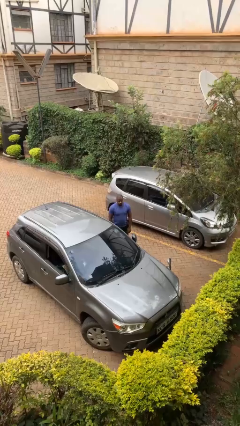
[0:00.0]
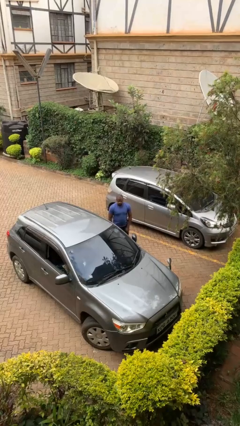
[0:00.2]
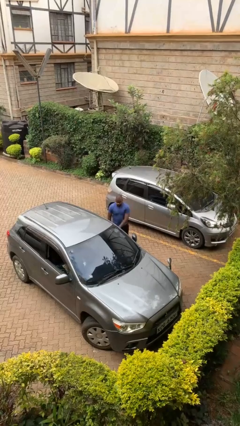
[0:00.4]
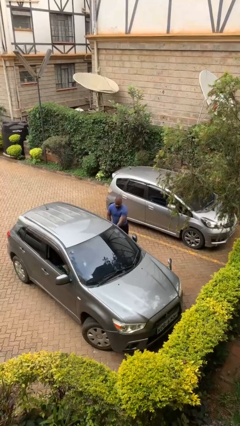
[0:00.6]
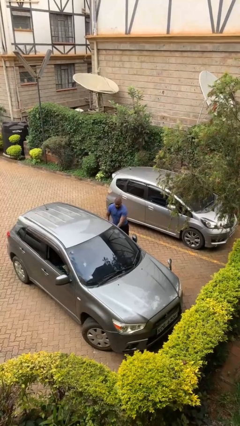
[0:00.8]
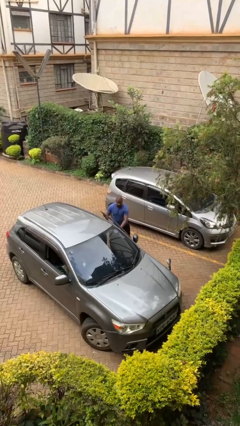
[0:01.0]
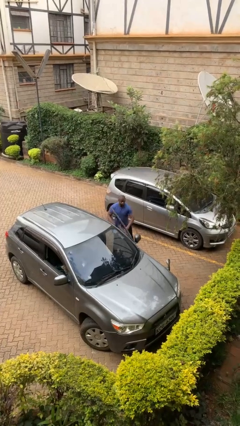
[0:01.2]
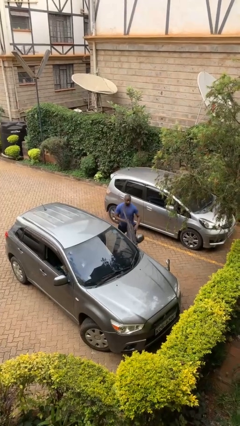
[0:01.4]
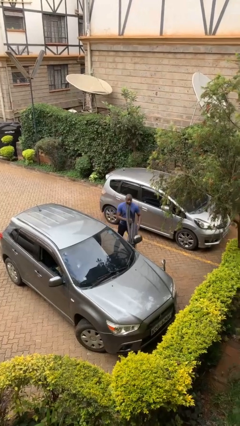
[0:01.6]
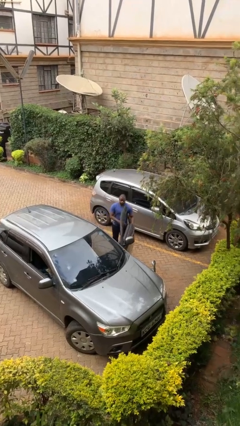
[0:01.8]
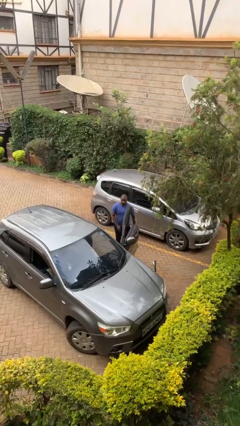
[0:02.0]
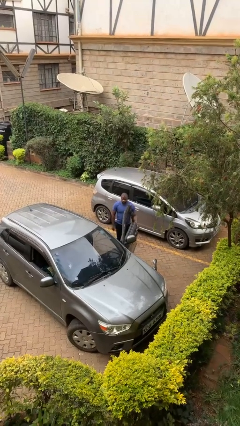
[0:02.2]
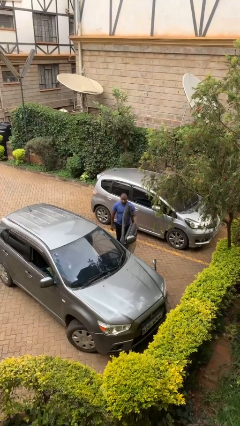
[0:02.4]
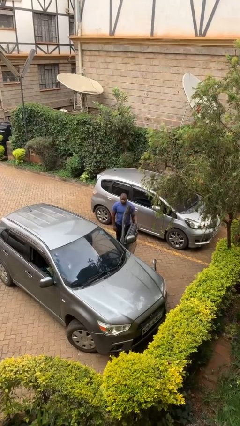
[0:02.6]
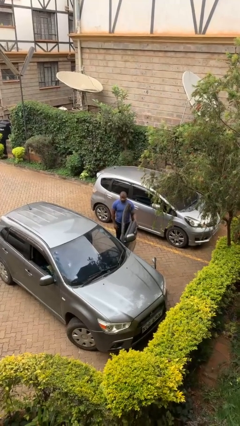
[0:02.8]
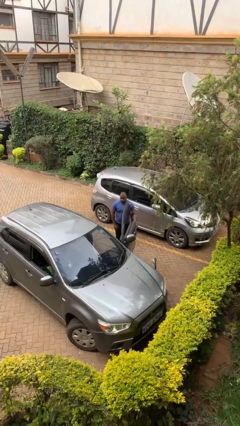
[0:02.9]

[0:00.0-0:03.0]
person opens car door

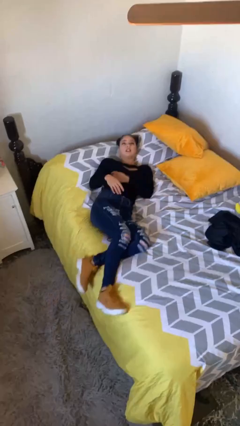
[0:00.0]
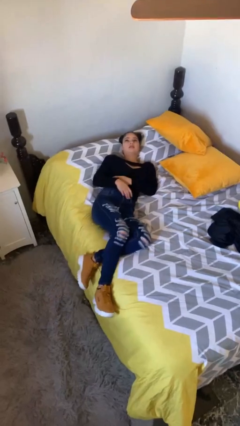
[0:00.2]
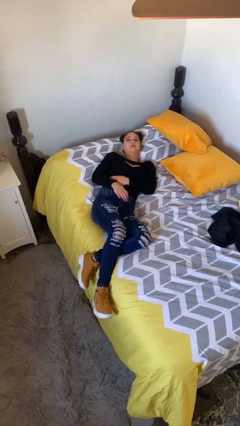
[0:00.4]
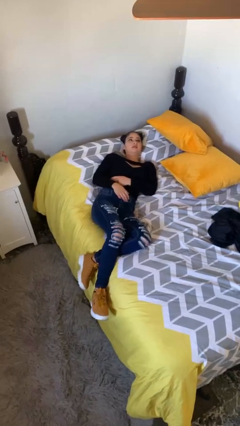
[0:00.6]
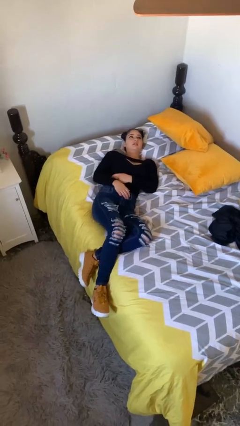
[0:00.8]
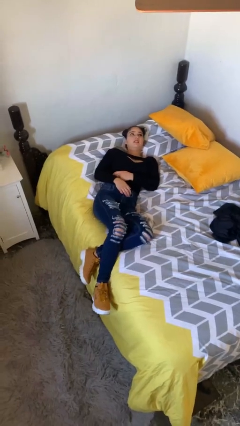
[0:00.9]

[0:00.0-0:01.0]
person lies down on bed

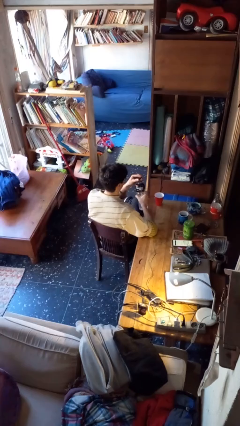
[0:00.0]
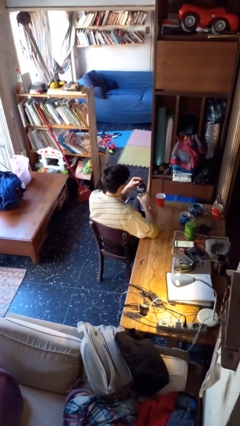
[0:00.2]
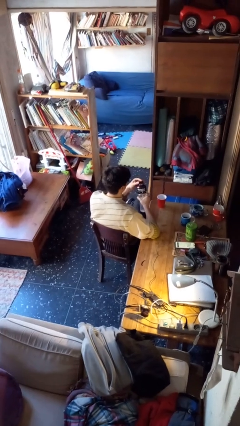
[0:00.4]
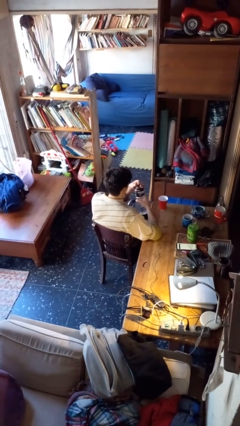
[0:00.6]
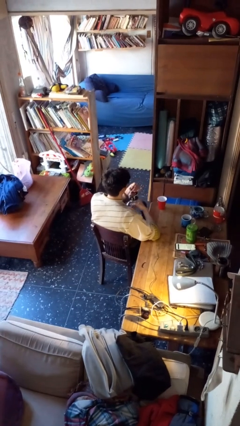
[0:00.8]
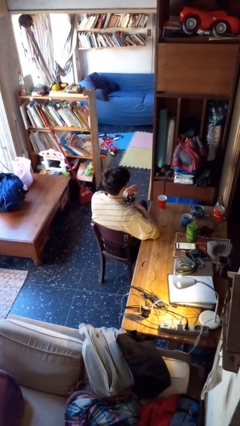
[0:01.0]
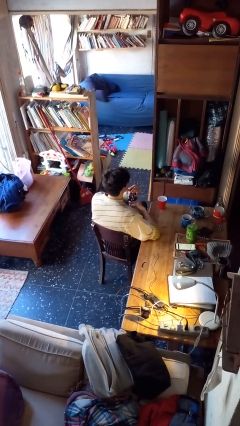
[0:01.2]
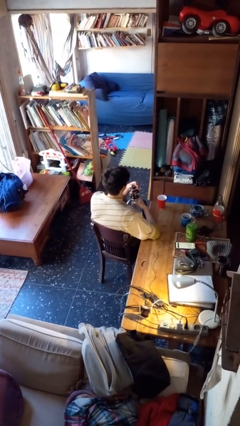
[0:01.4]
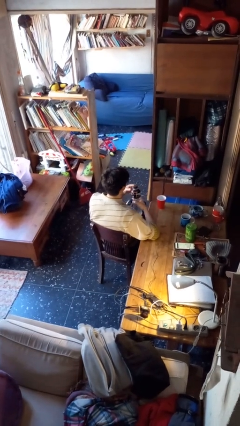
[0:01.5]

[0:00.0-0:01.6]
person screws lid to bottle

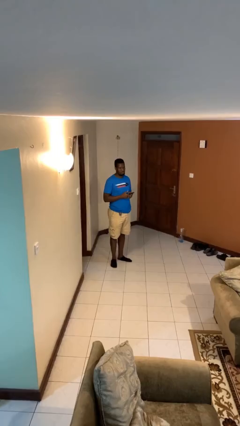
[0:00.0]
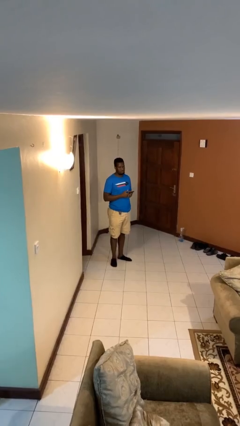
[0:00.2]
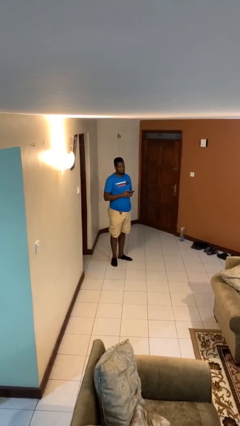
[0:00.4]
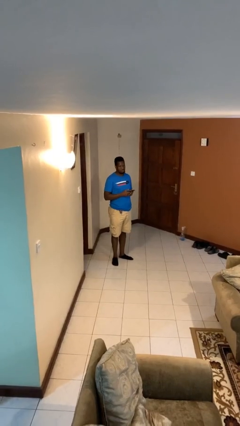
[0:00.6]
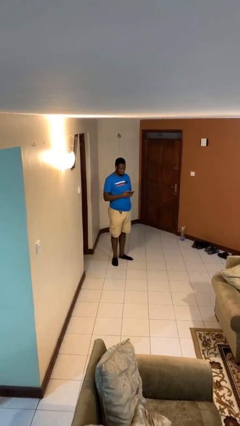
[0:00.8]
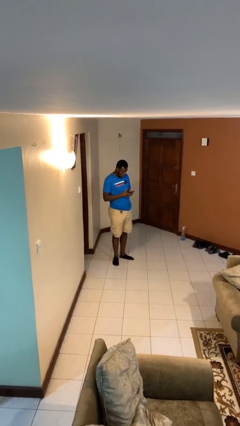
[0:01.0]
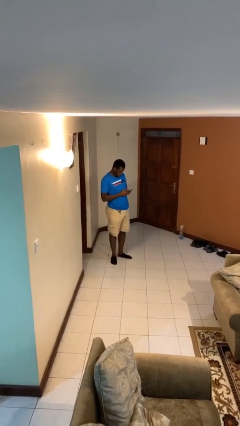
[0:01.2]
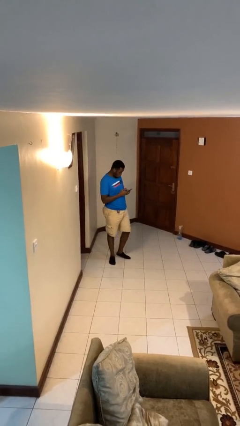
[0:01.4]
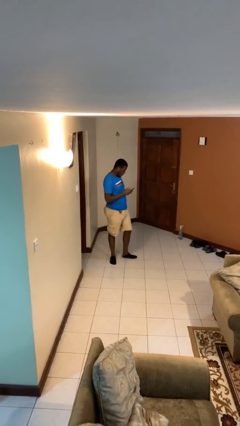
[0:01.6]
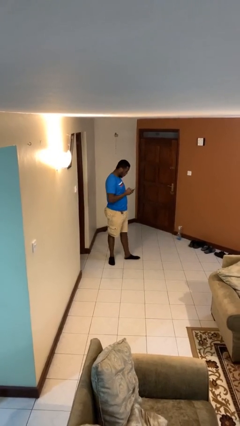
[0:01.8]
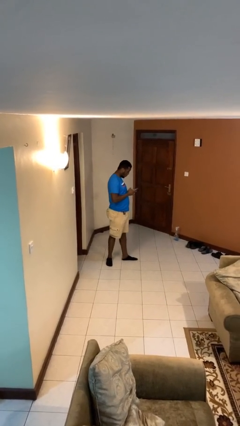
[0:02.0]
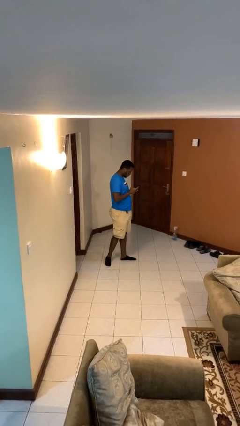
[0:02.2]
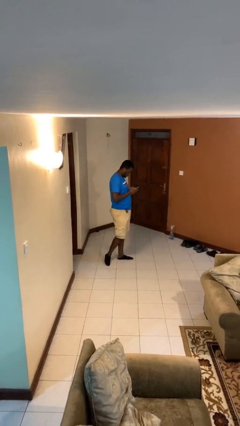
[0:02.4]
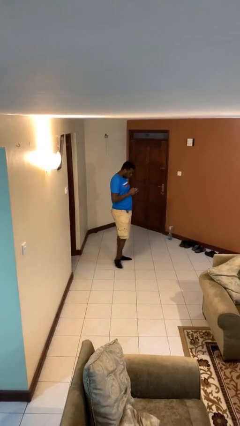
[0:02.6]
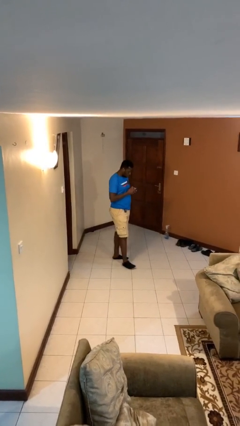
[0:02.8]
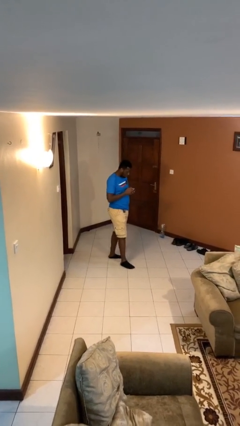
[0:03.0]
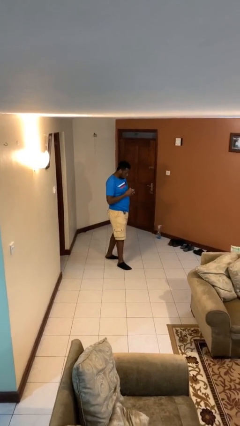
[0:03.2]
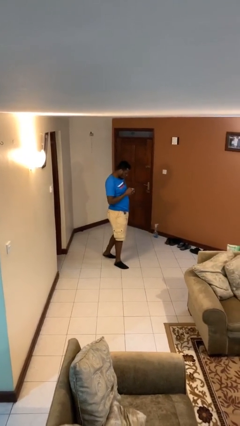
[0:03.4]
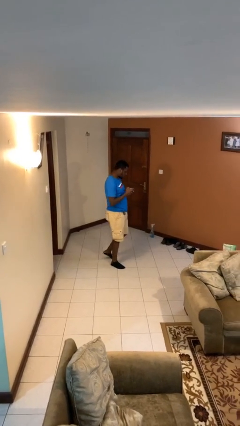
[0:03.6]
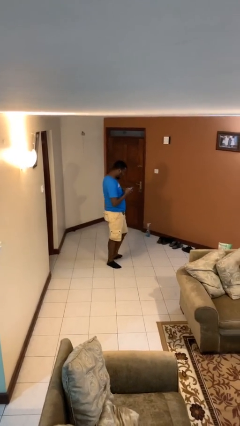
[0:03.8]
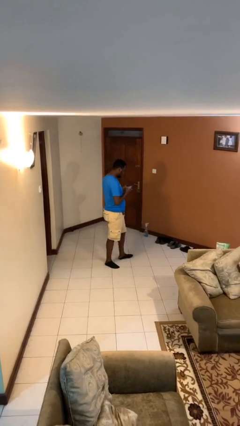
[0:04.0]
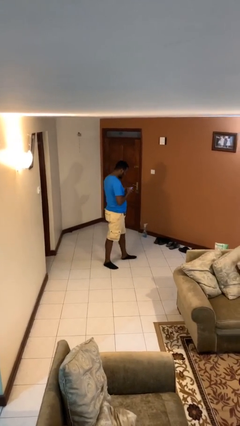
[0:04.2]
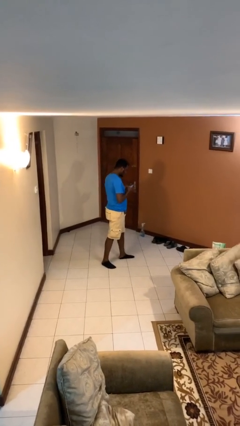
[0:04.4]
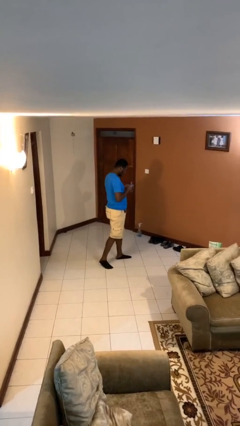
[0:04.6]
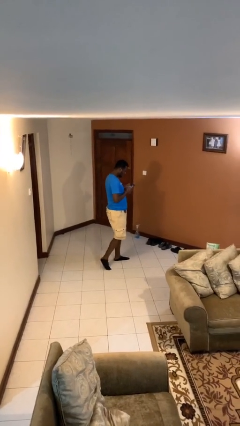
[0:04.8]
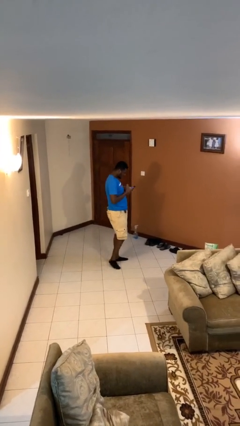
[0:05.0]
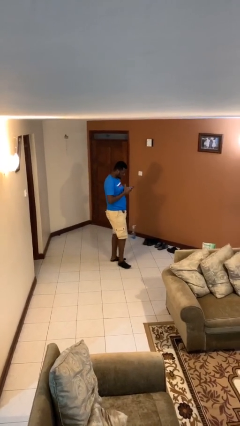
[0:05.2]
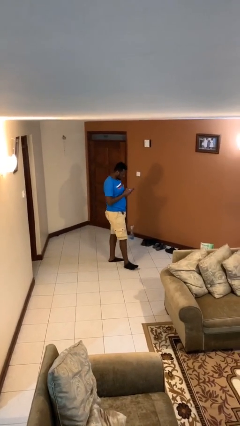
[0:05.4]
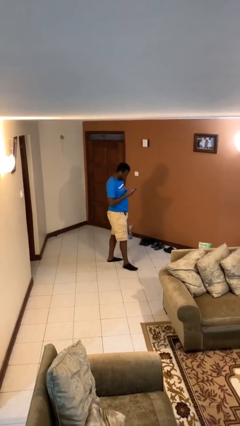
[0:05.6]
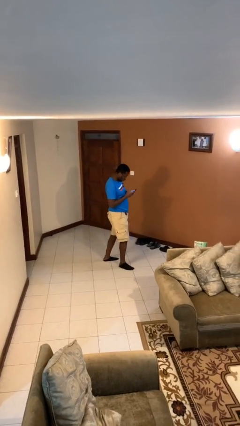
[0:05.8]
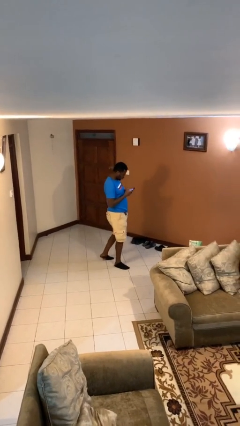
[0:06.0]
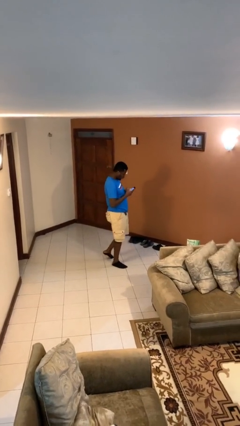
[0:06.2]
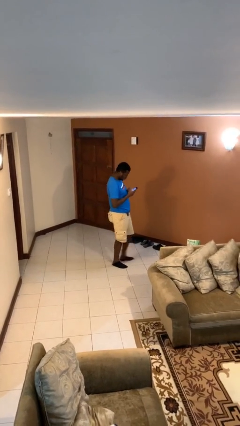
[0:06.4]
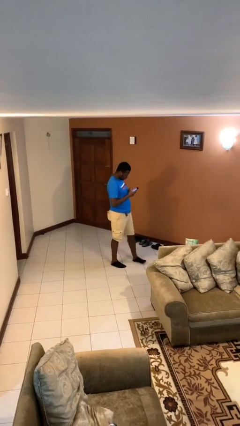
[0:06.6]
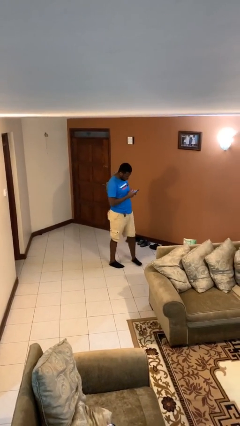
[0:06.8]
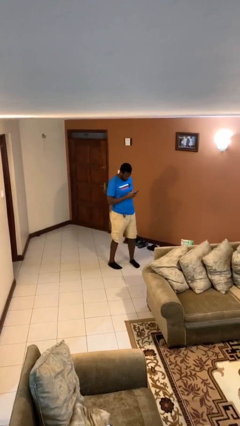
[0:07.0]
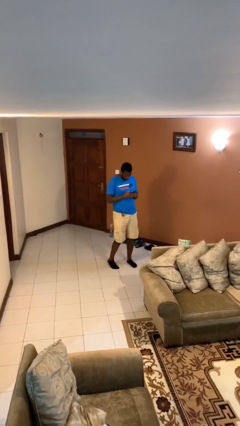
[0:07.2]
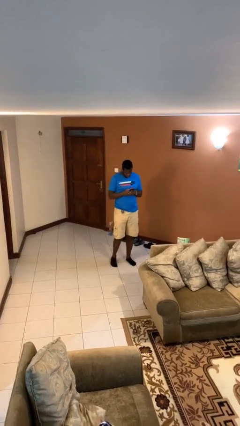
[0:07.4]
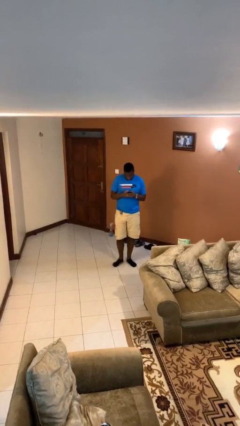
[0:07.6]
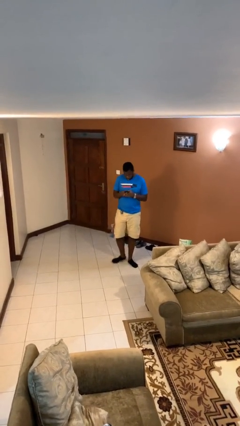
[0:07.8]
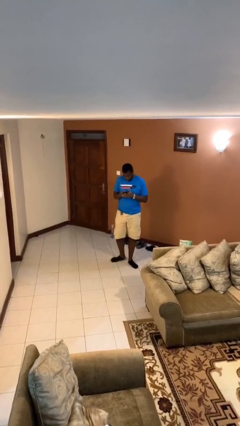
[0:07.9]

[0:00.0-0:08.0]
person texts on phone

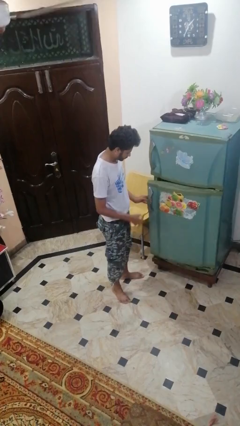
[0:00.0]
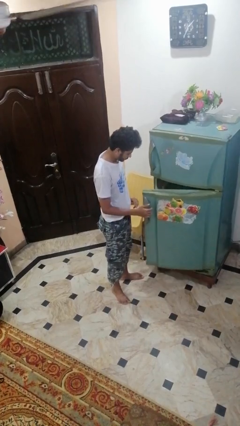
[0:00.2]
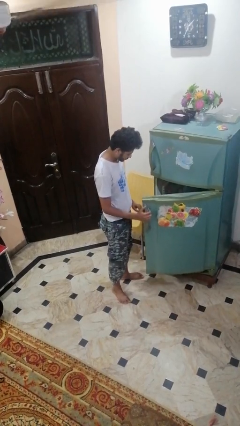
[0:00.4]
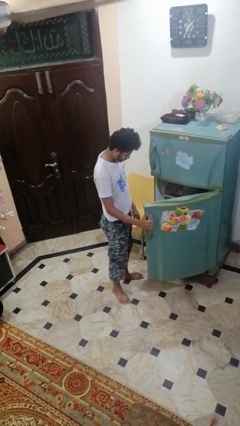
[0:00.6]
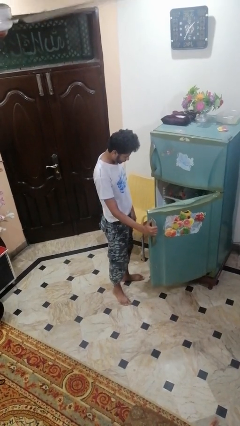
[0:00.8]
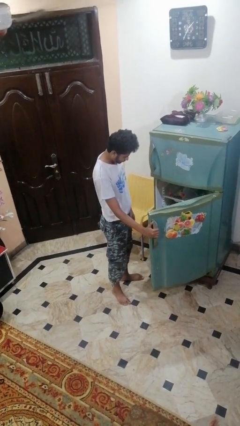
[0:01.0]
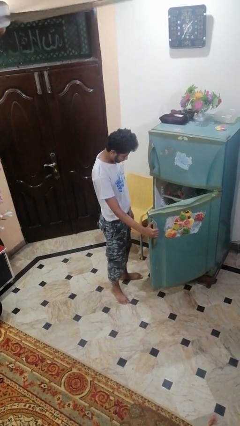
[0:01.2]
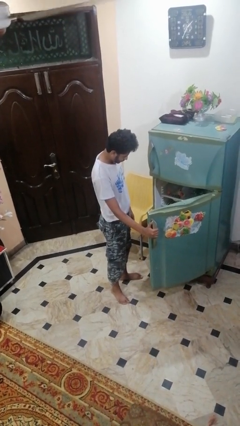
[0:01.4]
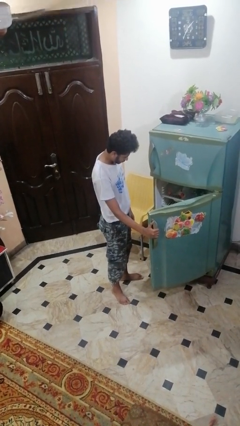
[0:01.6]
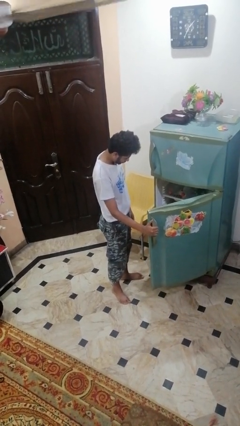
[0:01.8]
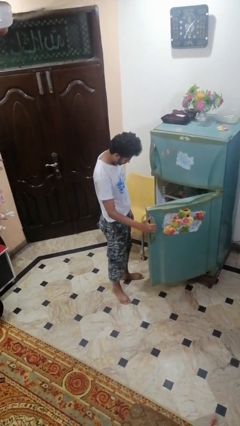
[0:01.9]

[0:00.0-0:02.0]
person opens refrigerator

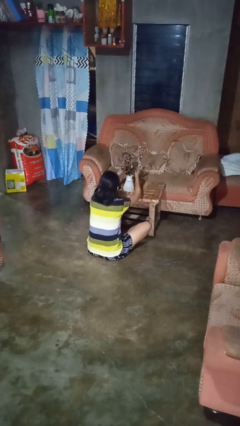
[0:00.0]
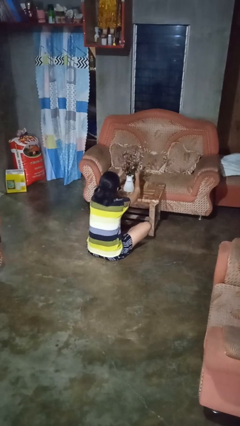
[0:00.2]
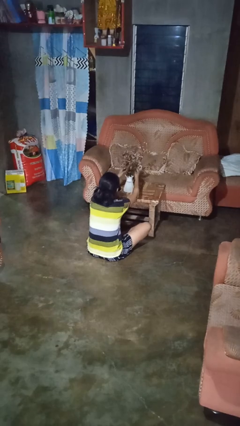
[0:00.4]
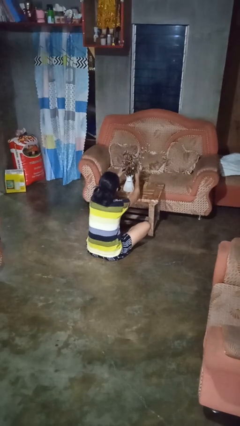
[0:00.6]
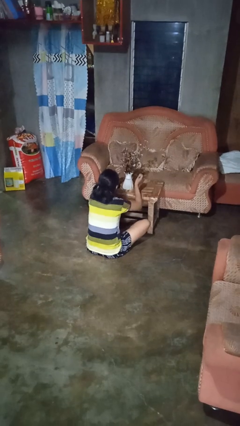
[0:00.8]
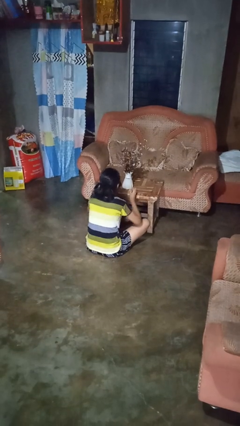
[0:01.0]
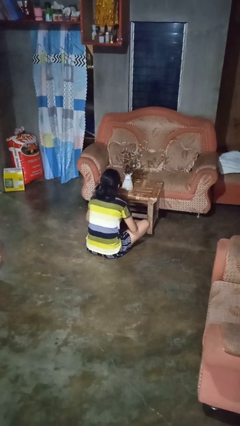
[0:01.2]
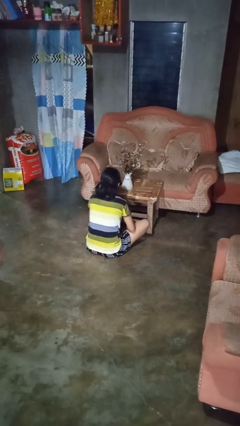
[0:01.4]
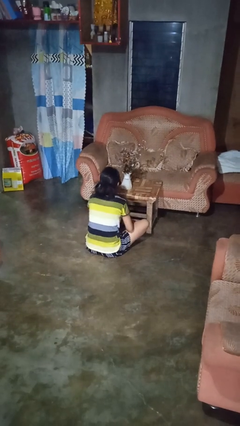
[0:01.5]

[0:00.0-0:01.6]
person arranges flowers in vase

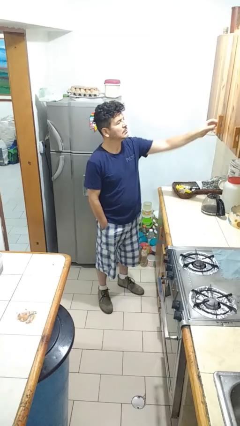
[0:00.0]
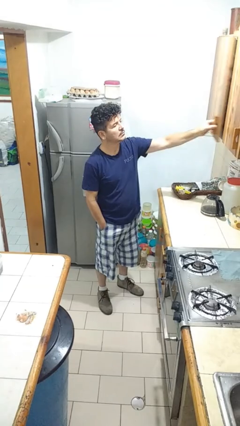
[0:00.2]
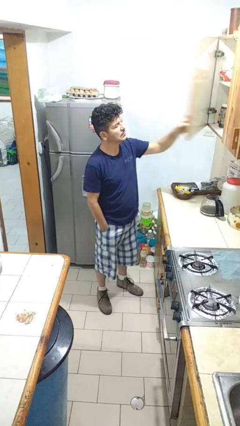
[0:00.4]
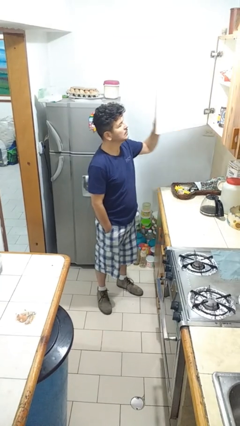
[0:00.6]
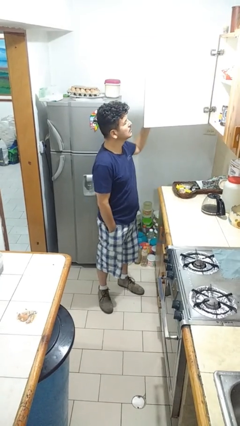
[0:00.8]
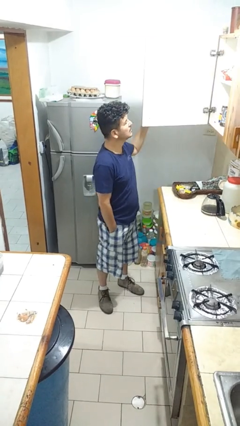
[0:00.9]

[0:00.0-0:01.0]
person opens cabinet
